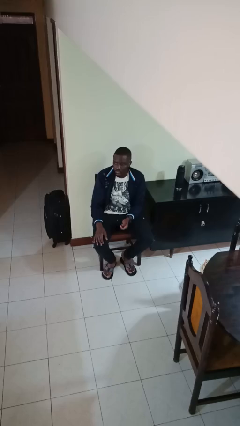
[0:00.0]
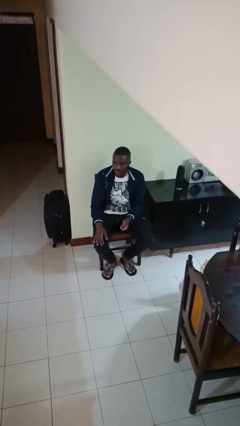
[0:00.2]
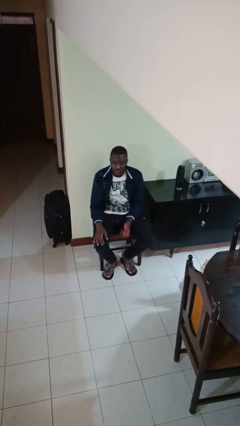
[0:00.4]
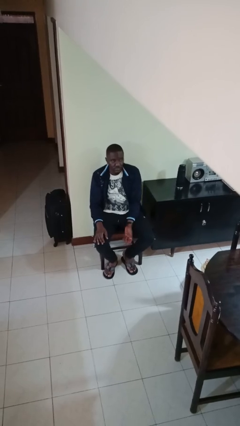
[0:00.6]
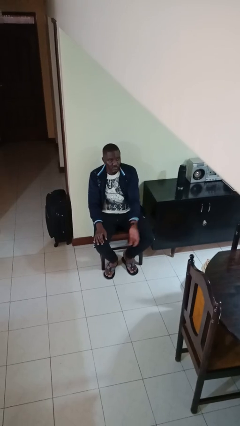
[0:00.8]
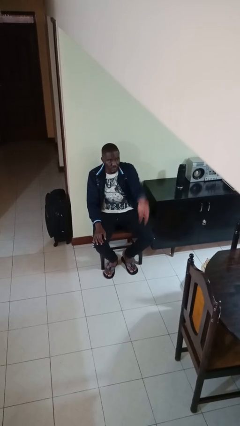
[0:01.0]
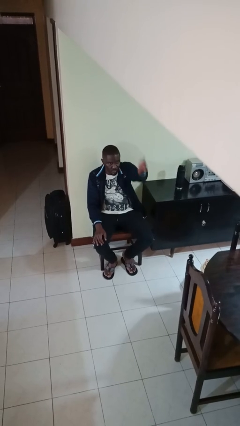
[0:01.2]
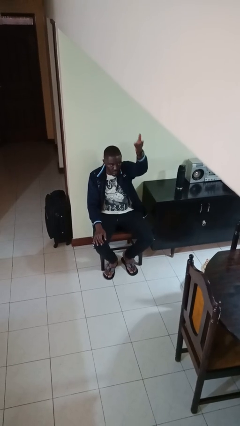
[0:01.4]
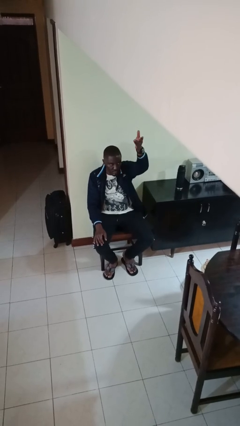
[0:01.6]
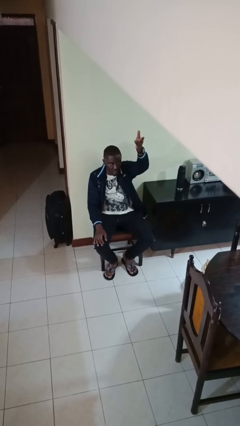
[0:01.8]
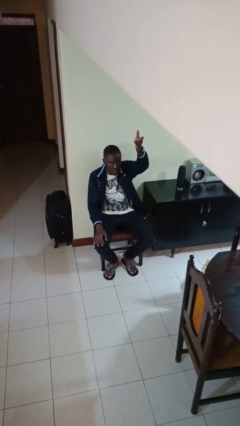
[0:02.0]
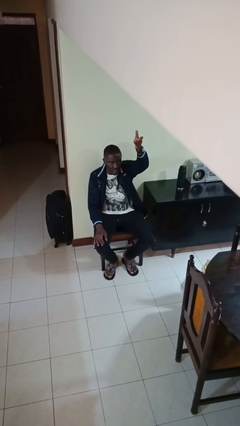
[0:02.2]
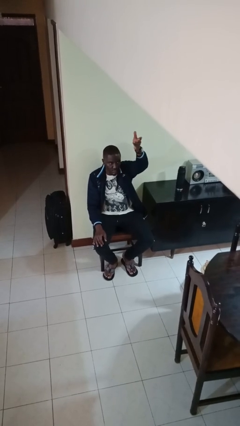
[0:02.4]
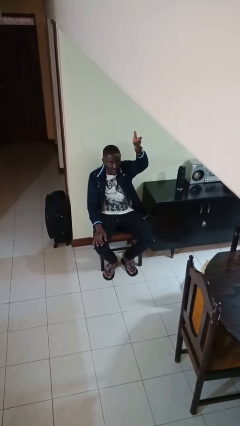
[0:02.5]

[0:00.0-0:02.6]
person gestures swipe up

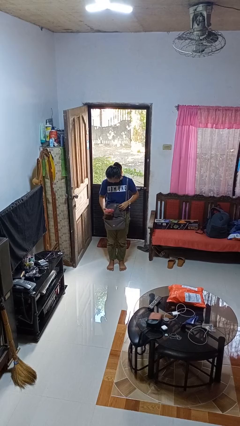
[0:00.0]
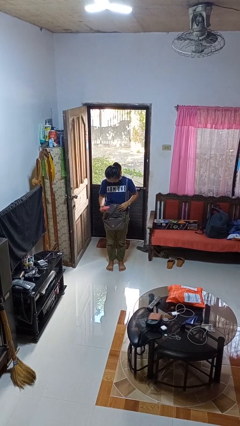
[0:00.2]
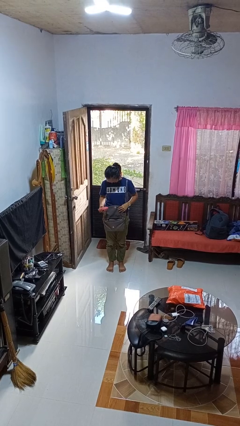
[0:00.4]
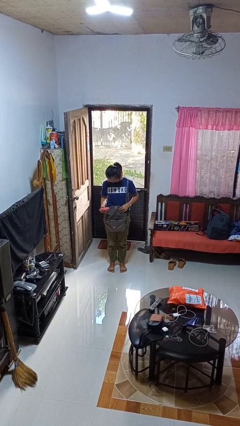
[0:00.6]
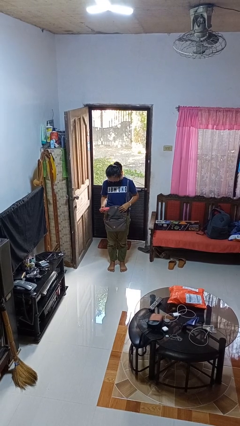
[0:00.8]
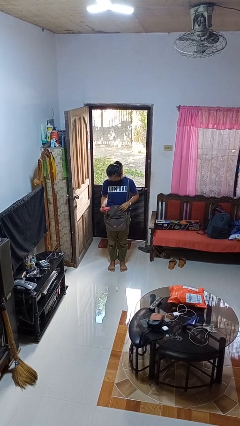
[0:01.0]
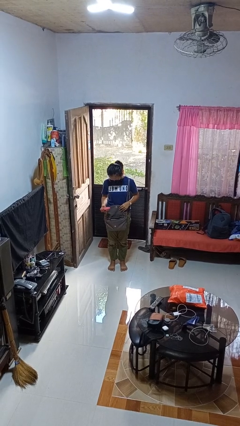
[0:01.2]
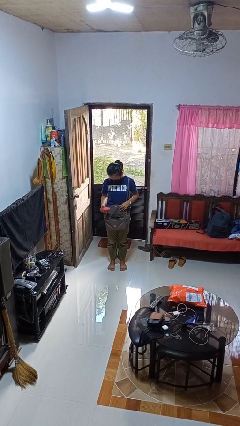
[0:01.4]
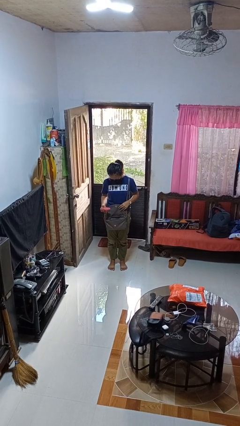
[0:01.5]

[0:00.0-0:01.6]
person takes object from purse

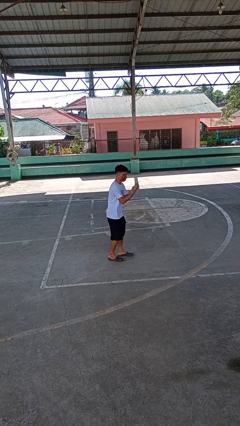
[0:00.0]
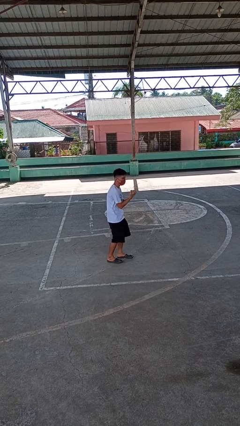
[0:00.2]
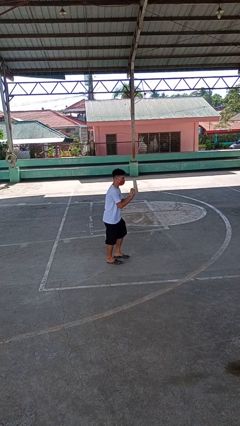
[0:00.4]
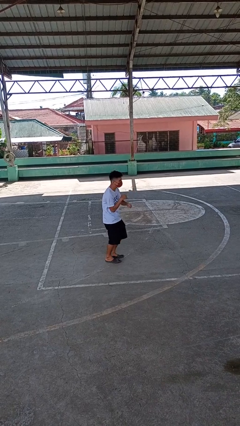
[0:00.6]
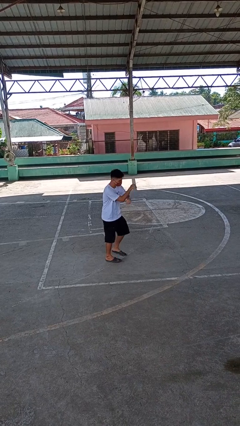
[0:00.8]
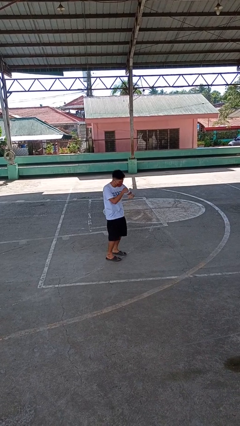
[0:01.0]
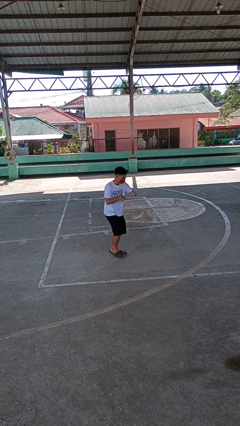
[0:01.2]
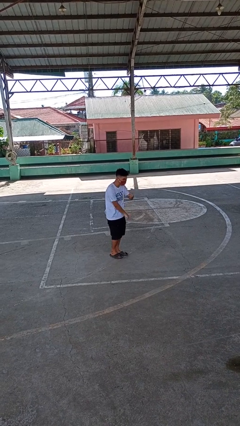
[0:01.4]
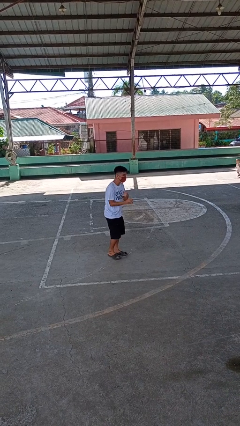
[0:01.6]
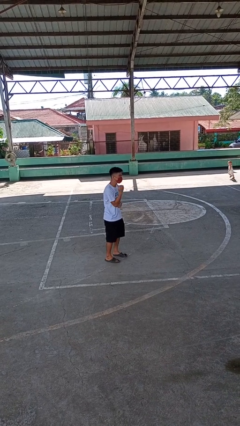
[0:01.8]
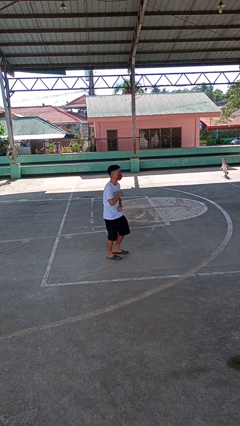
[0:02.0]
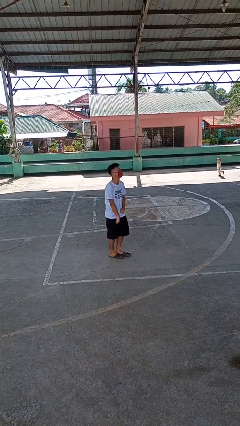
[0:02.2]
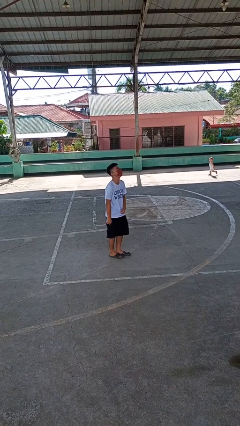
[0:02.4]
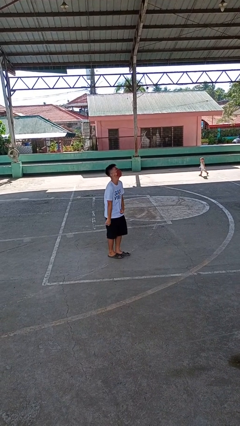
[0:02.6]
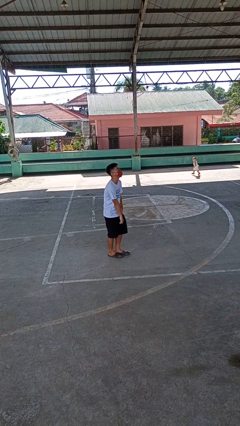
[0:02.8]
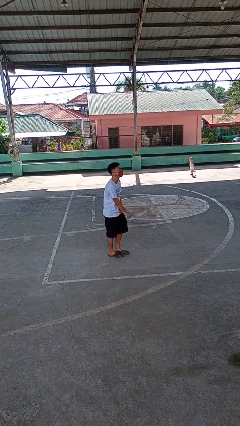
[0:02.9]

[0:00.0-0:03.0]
person dances in place

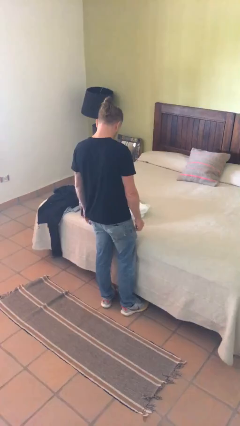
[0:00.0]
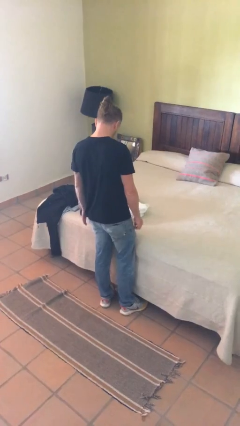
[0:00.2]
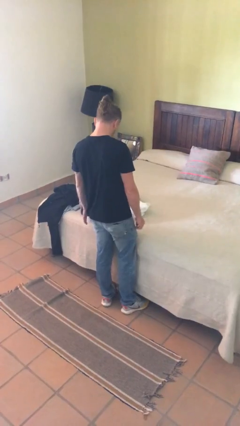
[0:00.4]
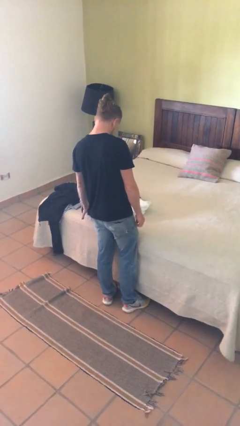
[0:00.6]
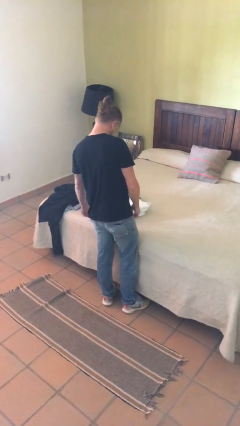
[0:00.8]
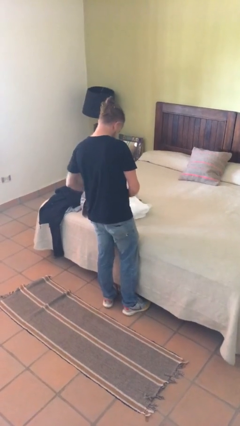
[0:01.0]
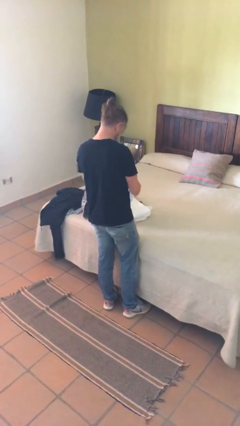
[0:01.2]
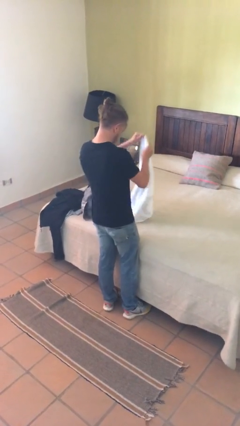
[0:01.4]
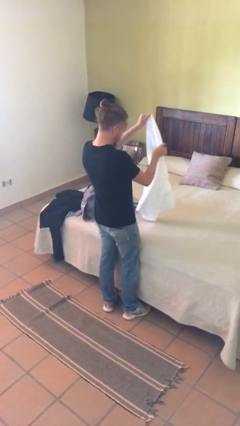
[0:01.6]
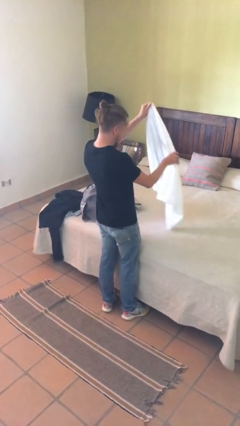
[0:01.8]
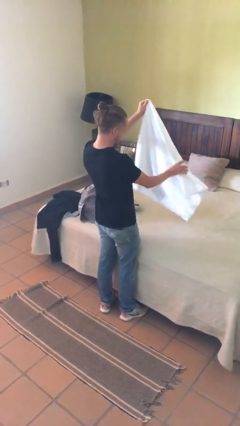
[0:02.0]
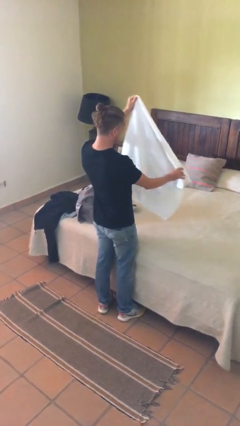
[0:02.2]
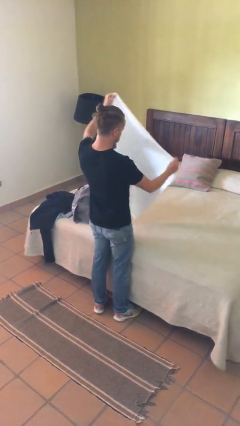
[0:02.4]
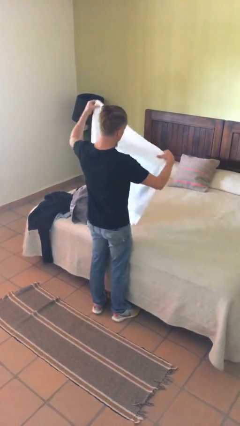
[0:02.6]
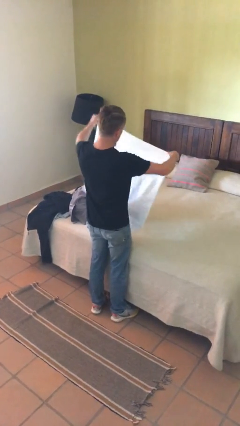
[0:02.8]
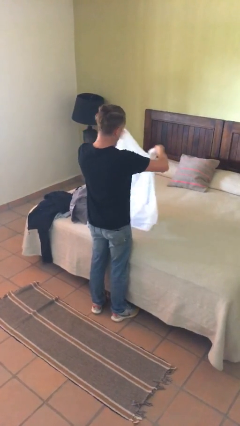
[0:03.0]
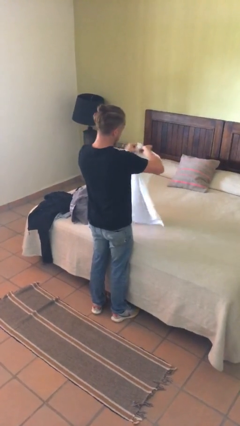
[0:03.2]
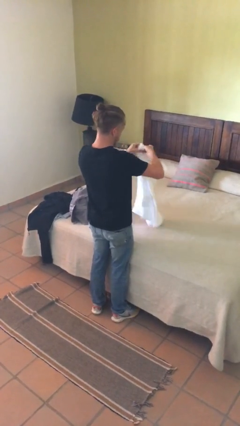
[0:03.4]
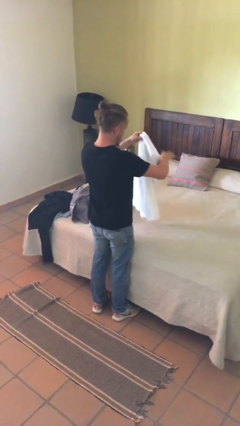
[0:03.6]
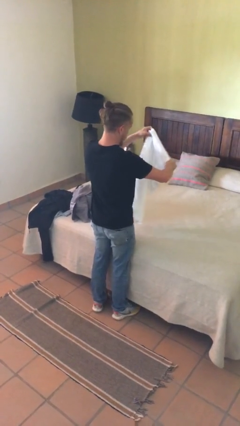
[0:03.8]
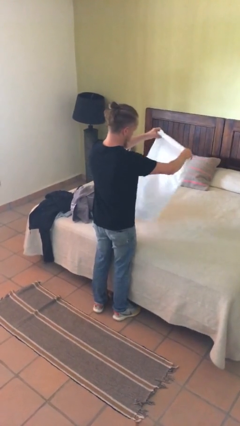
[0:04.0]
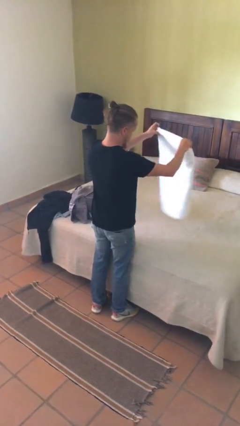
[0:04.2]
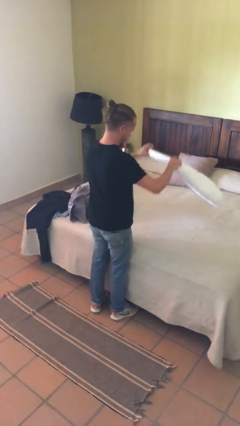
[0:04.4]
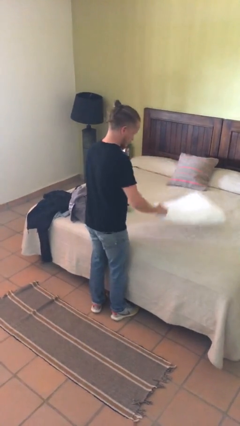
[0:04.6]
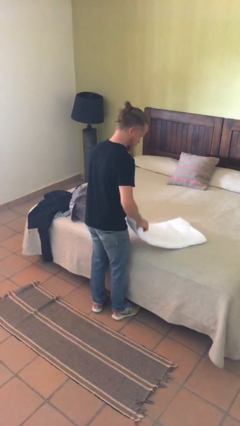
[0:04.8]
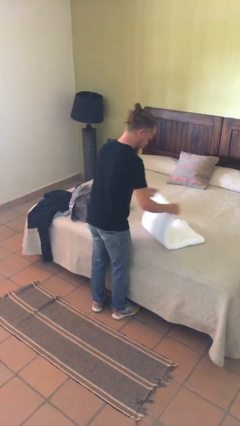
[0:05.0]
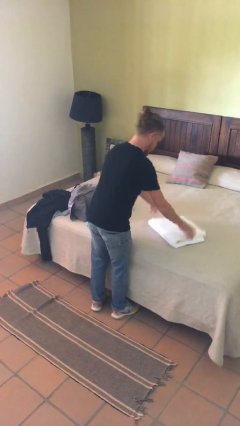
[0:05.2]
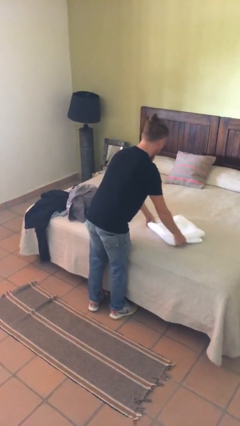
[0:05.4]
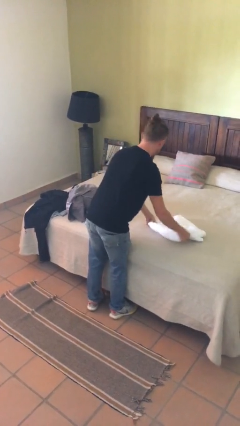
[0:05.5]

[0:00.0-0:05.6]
person folds towel

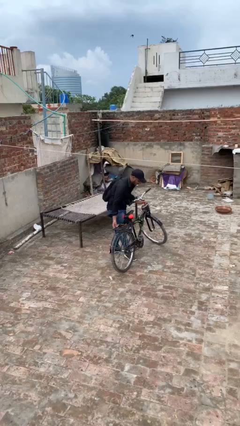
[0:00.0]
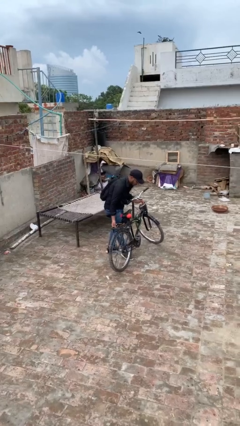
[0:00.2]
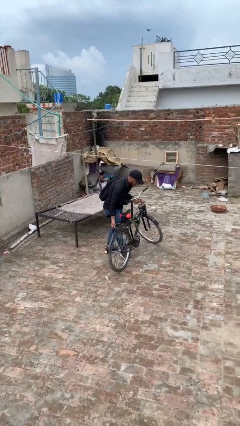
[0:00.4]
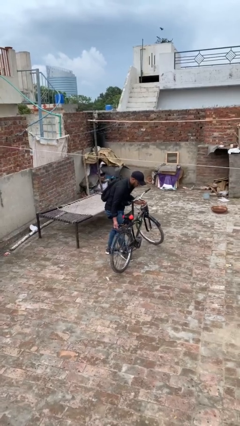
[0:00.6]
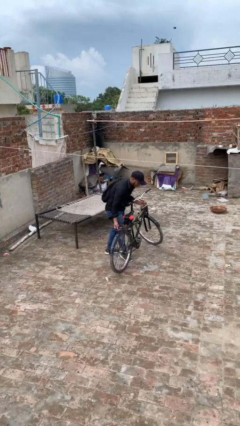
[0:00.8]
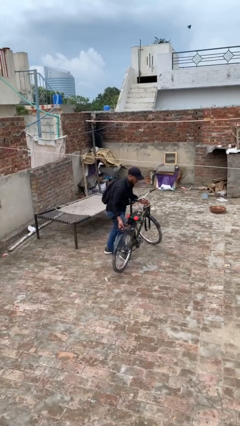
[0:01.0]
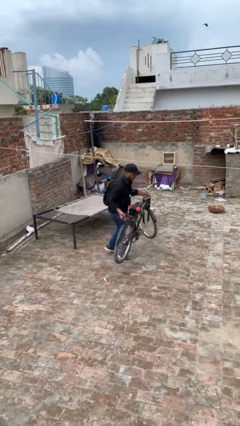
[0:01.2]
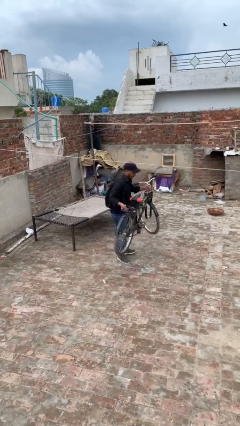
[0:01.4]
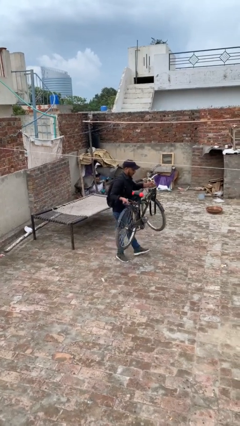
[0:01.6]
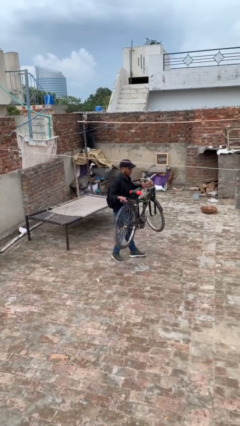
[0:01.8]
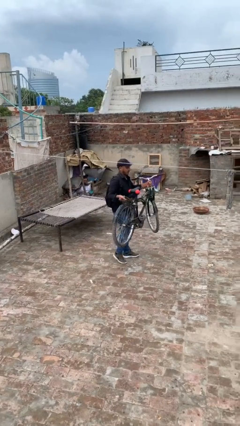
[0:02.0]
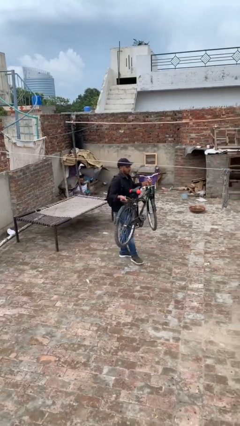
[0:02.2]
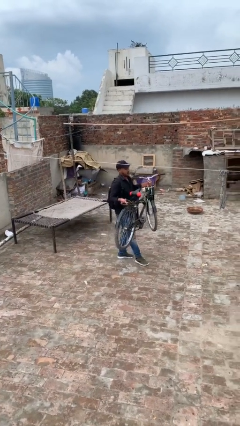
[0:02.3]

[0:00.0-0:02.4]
person picks up object from floor

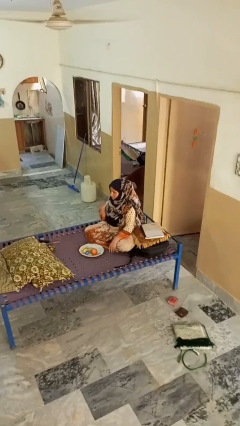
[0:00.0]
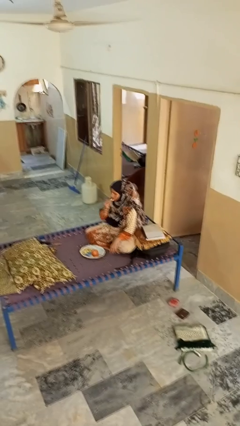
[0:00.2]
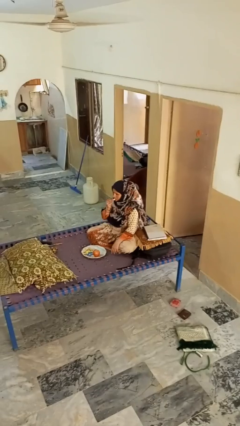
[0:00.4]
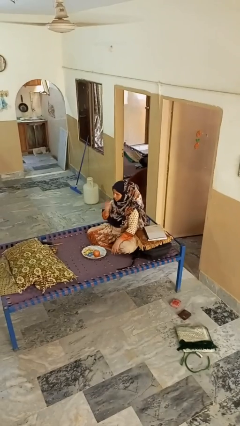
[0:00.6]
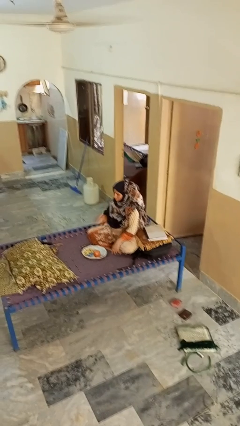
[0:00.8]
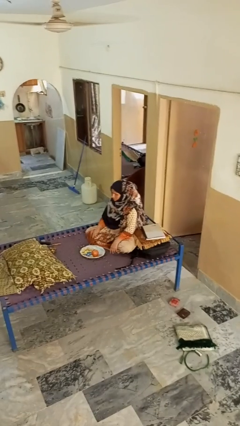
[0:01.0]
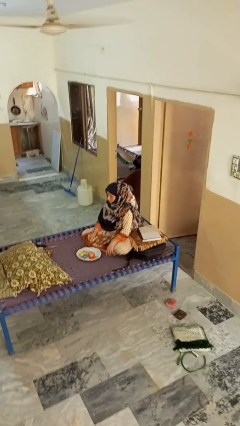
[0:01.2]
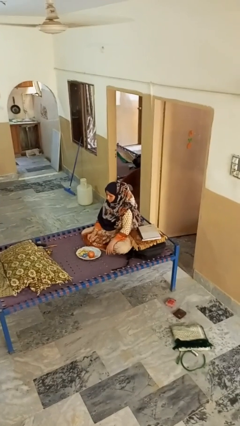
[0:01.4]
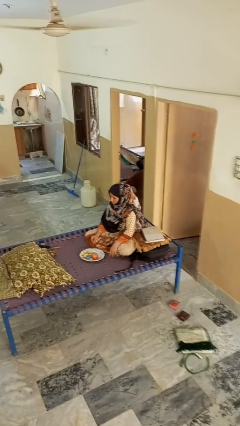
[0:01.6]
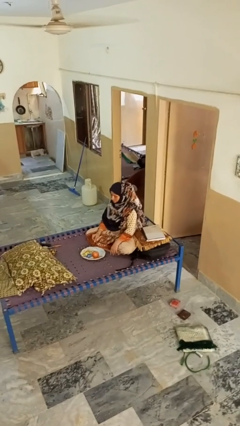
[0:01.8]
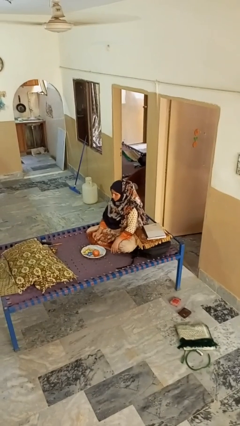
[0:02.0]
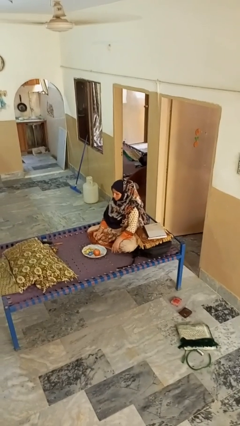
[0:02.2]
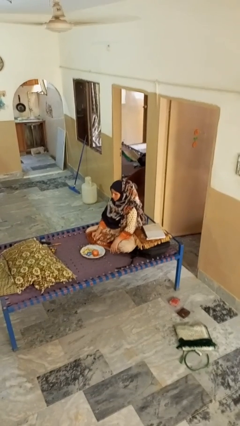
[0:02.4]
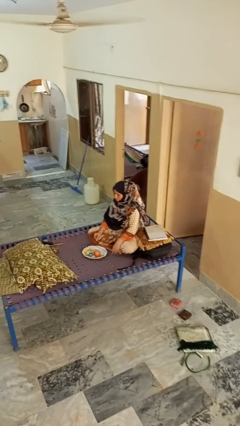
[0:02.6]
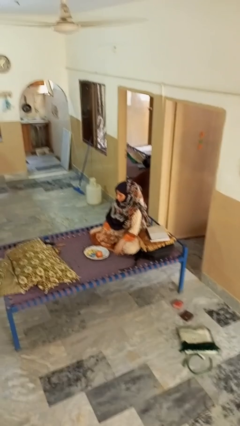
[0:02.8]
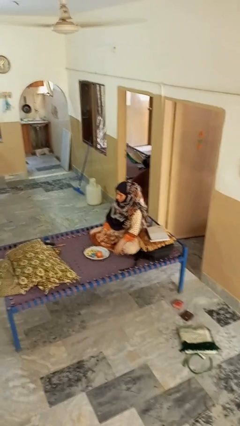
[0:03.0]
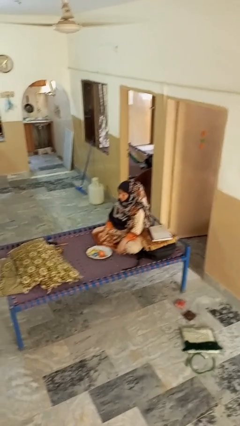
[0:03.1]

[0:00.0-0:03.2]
person eats apple
